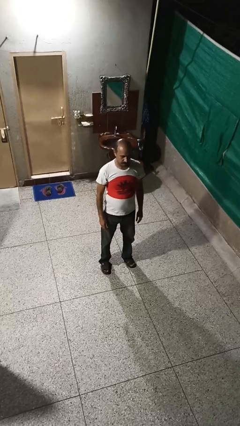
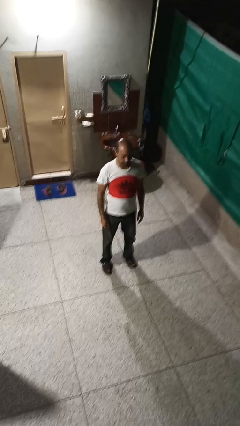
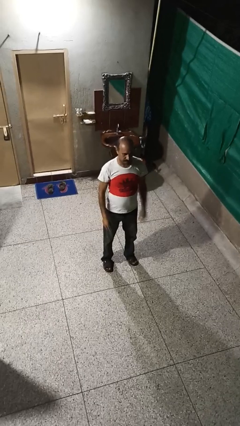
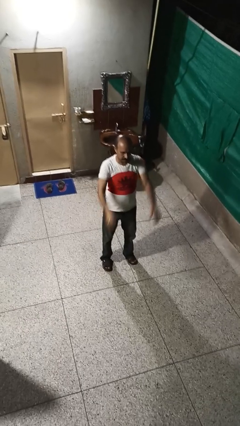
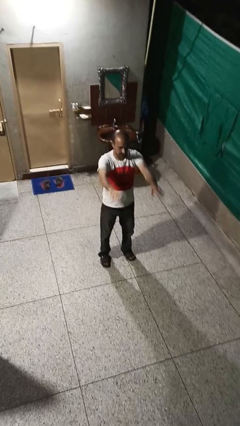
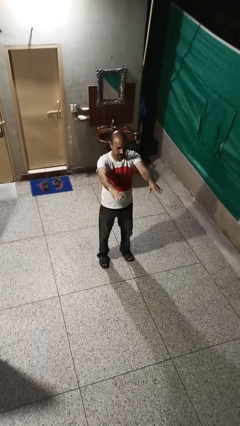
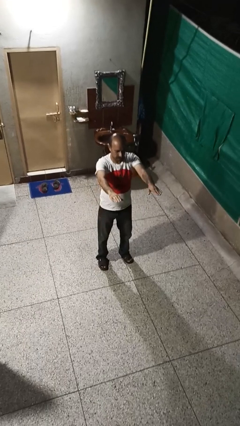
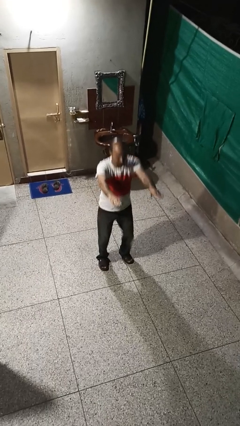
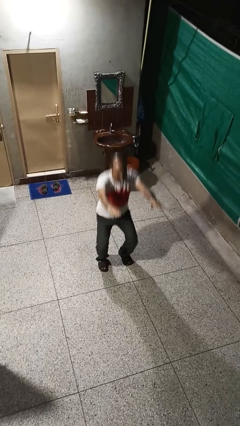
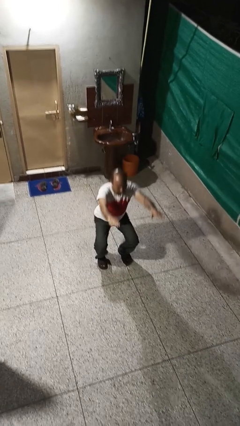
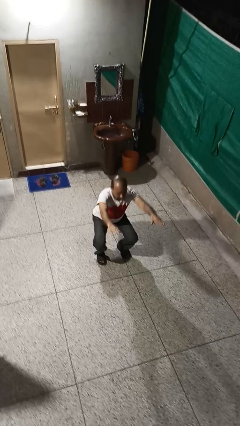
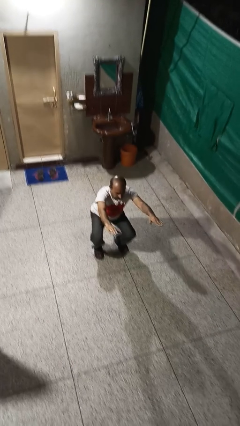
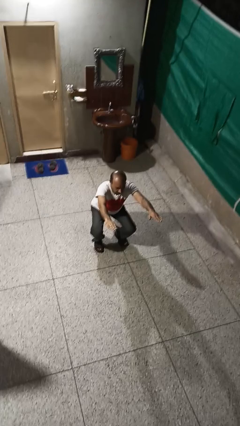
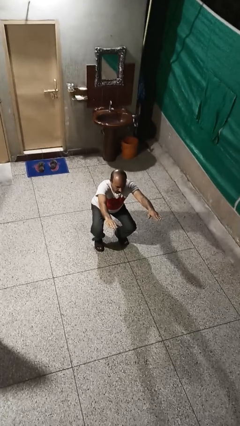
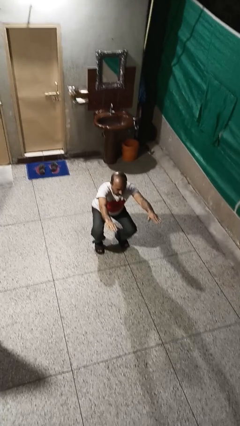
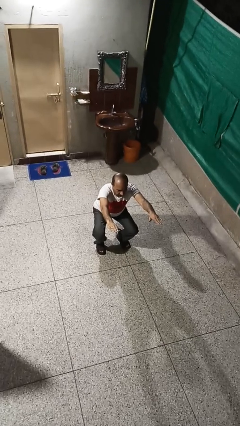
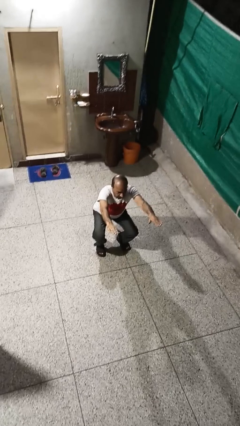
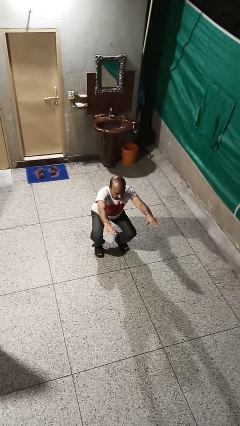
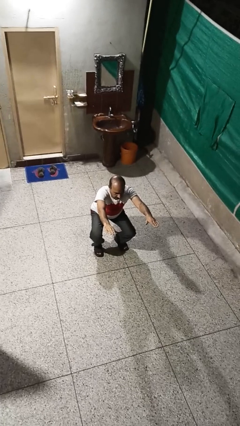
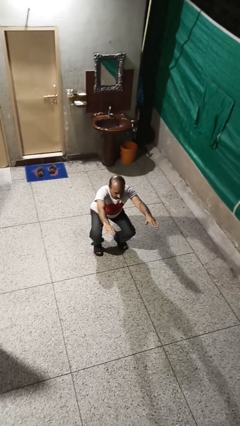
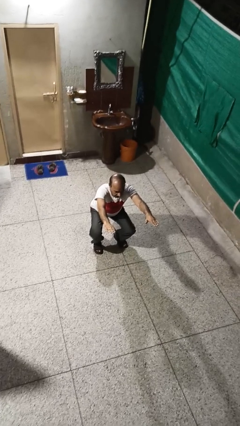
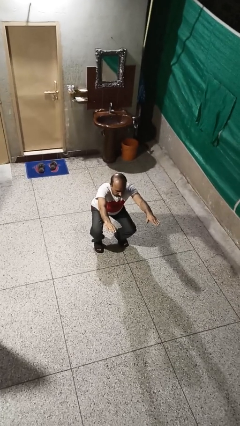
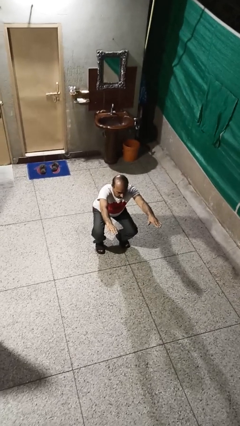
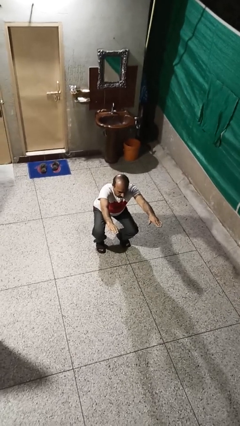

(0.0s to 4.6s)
person squats

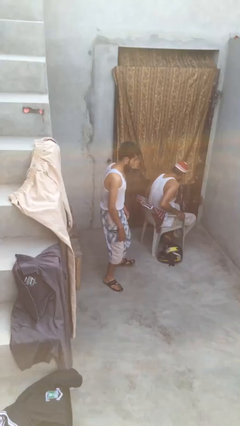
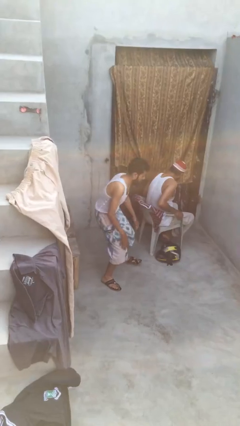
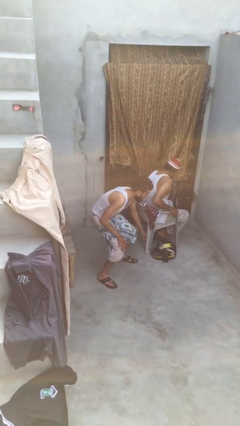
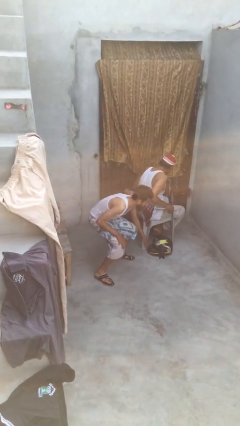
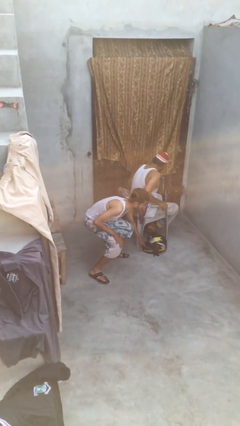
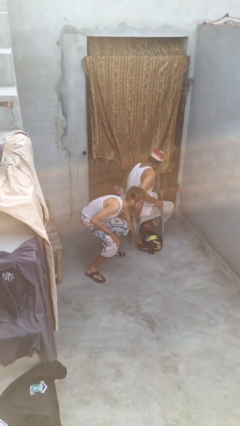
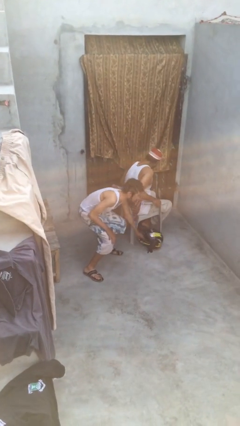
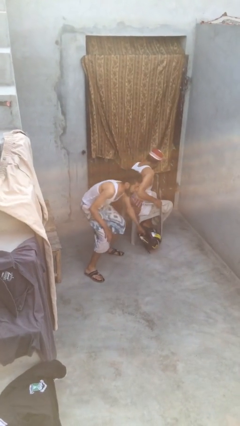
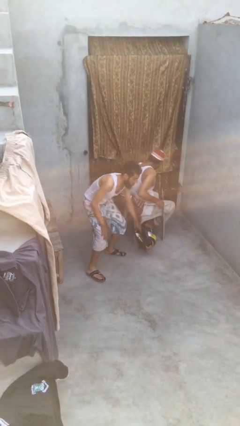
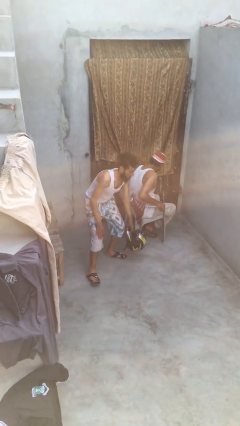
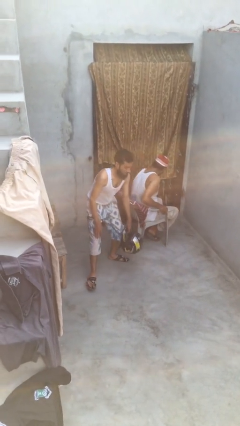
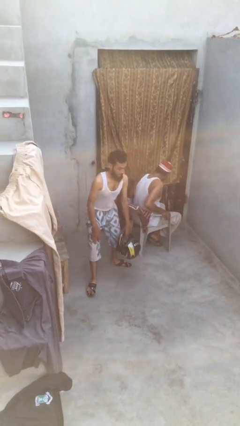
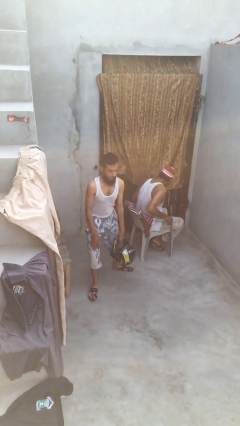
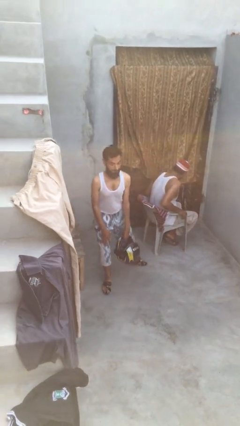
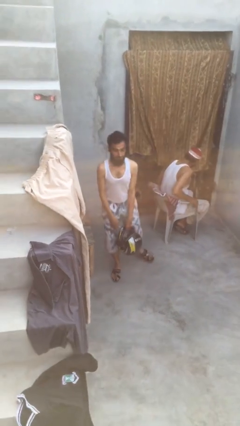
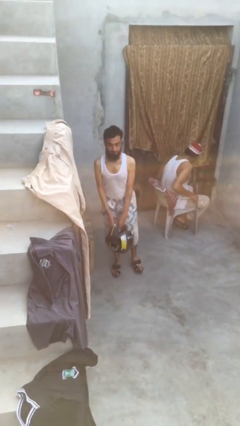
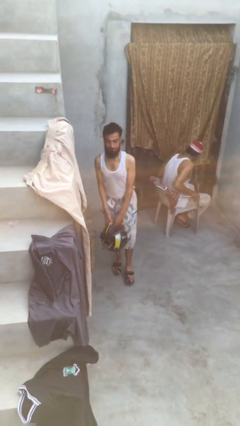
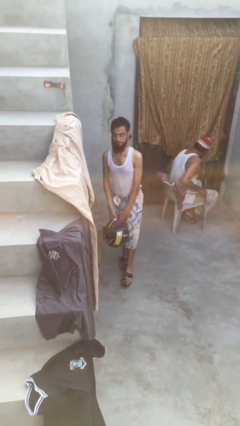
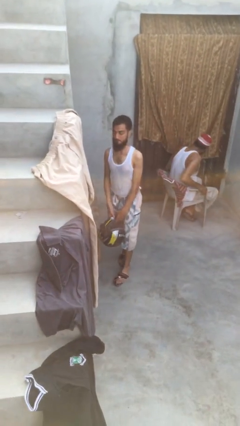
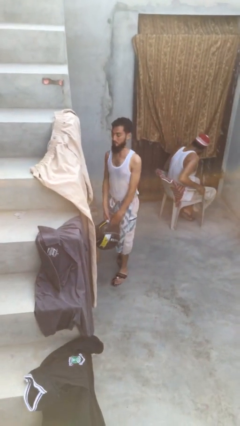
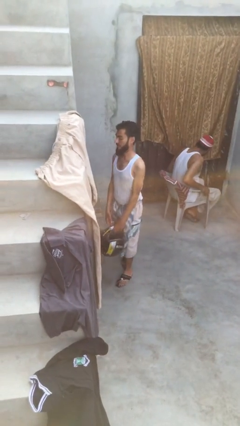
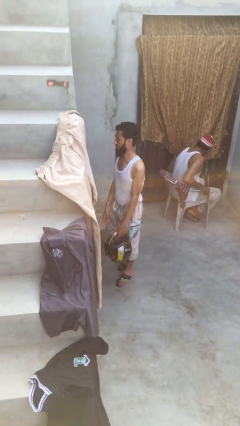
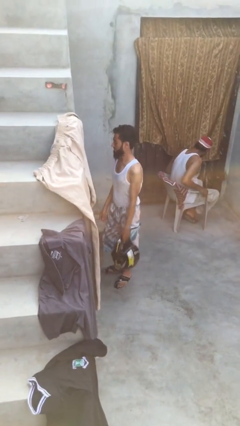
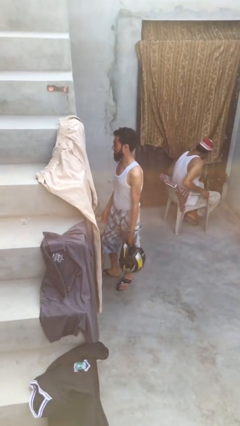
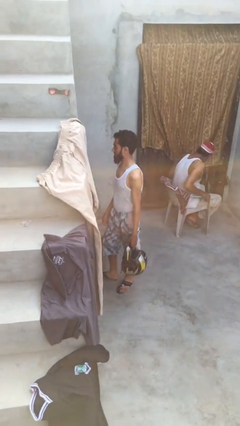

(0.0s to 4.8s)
person steals object from person

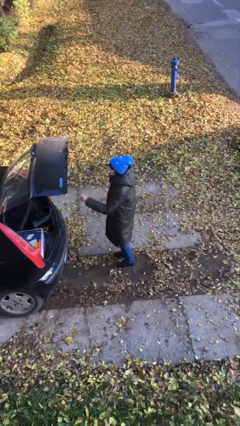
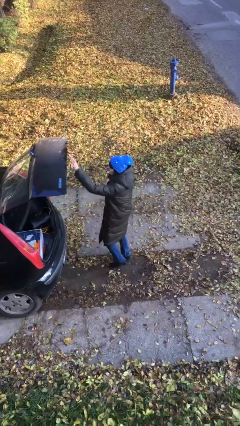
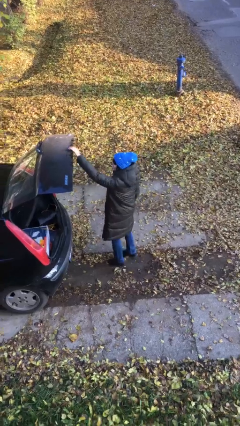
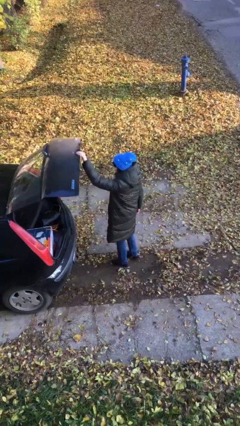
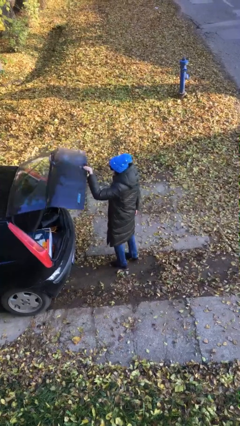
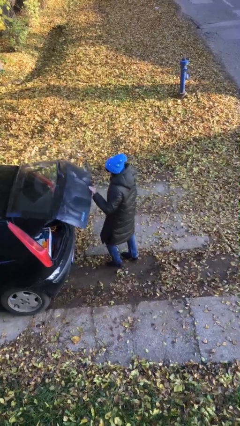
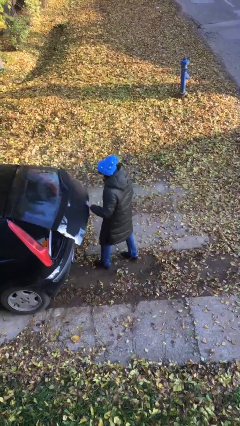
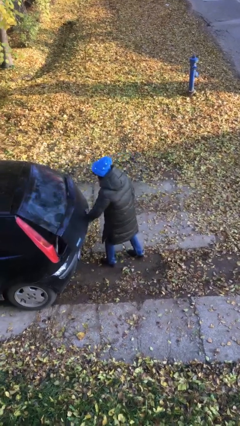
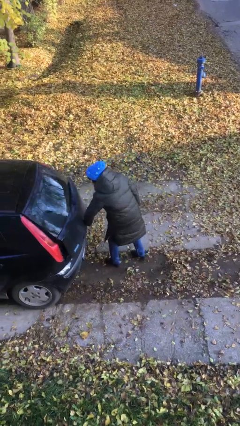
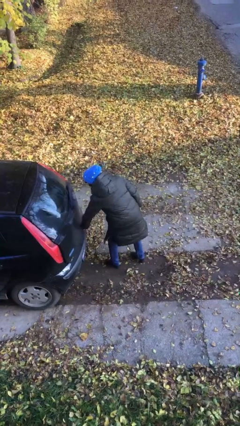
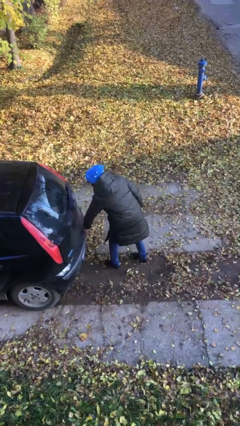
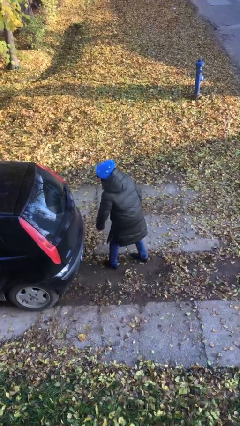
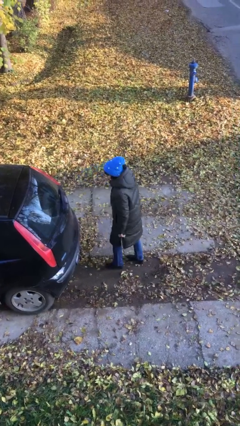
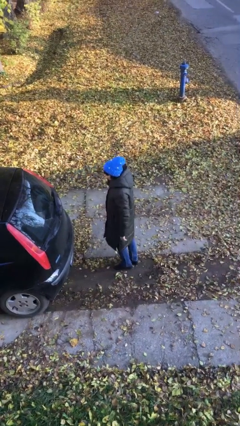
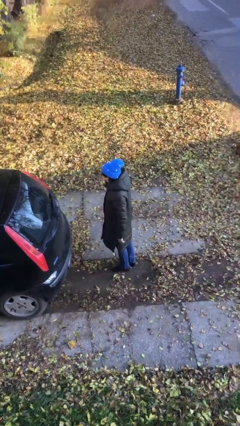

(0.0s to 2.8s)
person closes car trunk

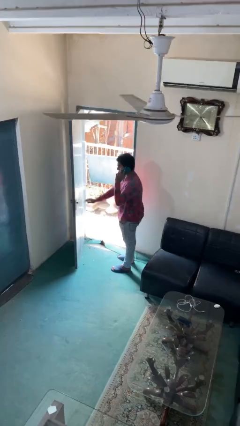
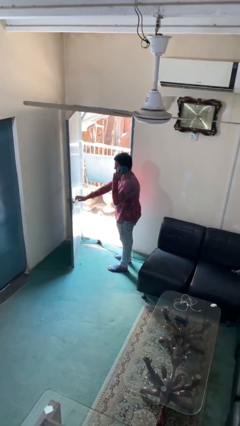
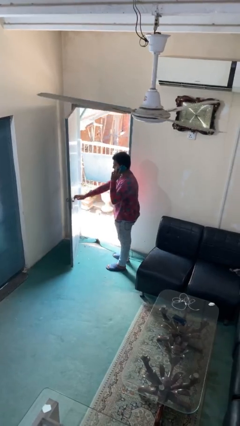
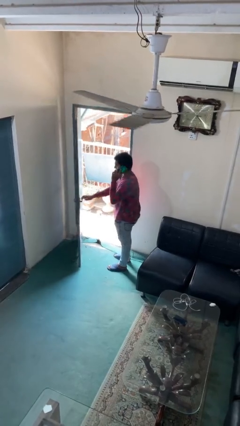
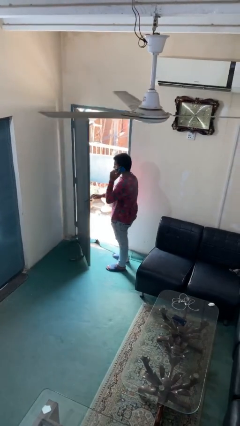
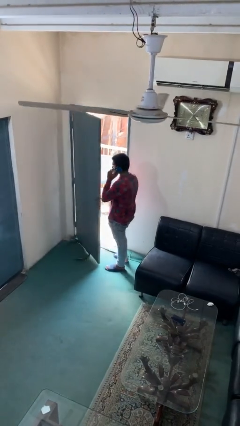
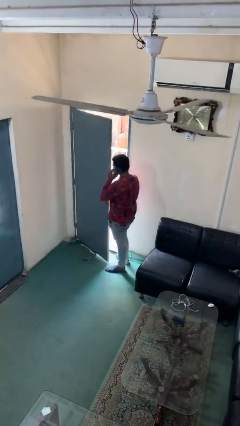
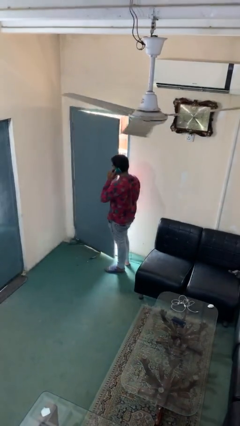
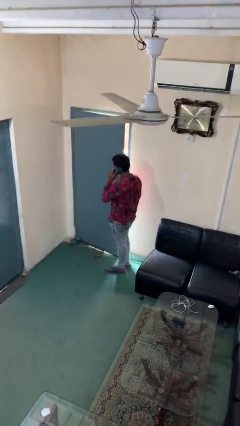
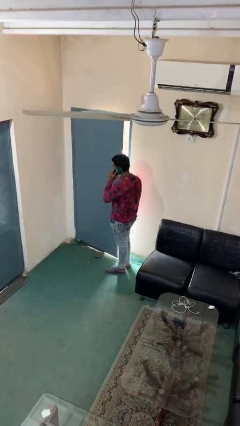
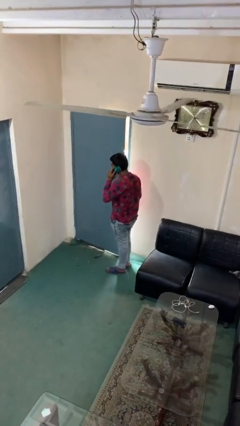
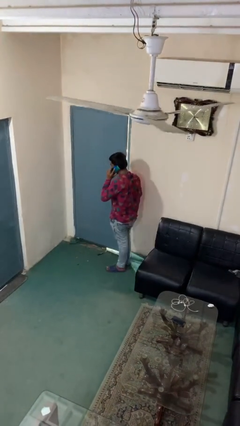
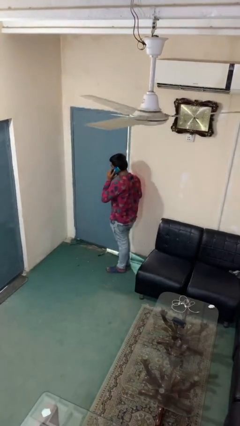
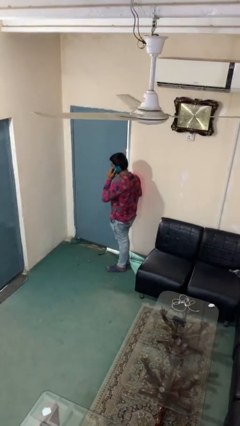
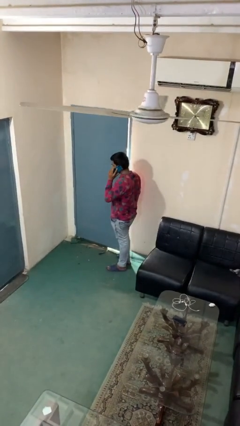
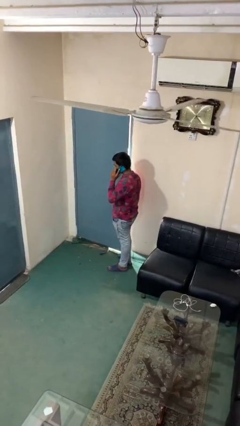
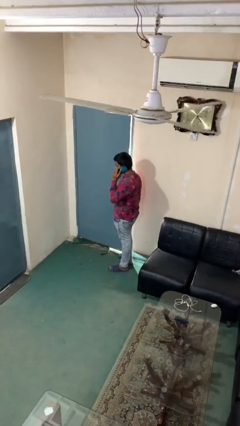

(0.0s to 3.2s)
person closes facility door

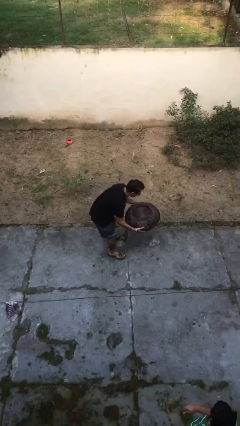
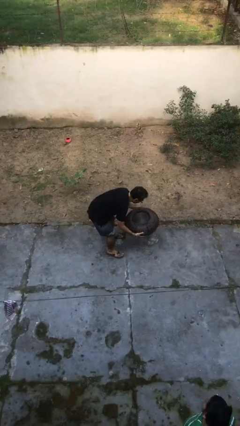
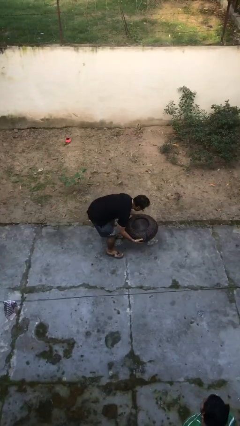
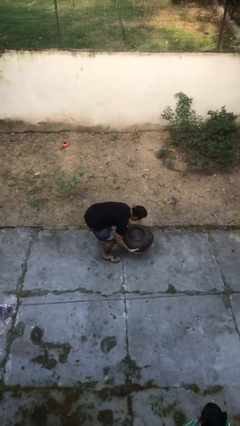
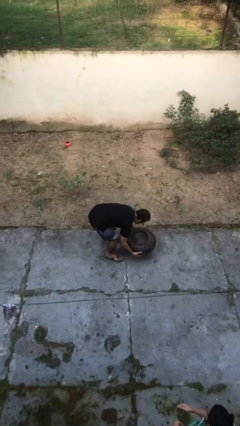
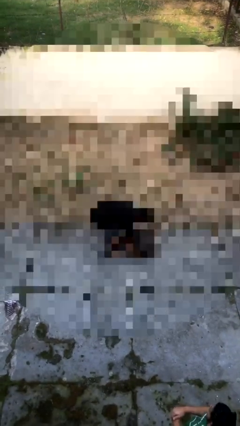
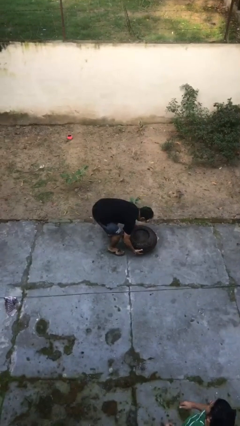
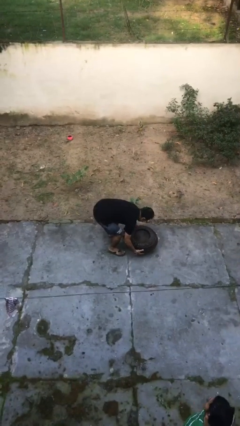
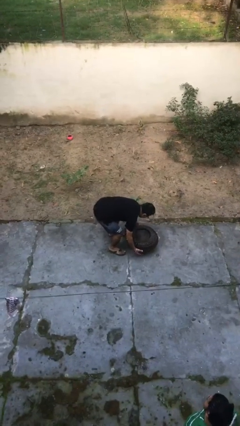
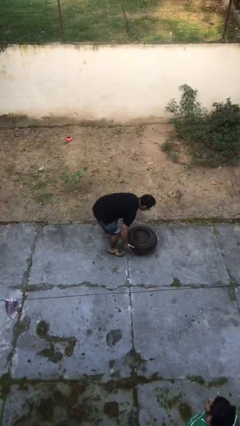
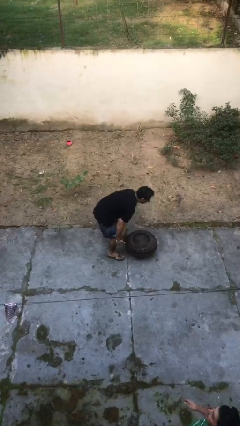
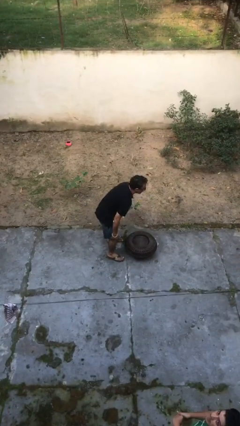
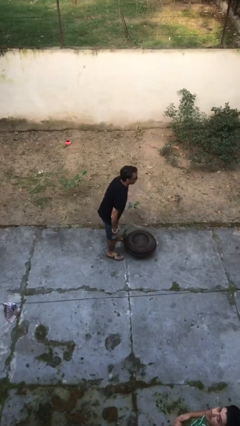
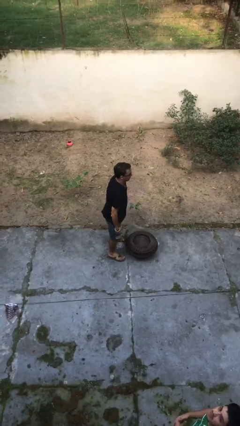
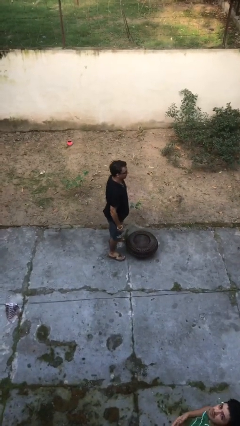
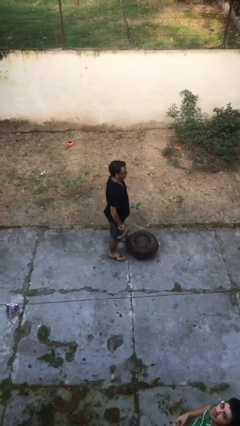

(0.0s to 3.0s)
person puts down object on floor
